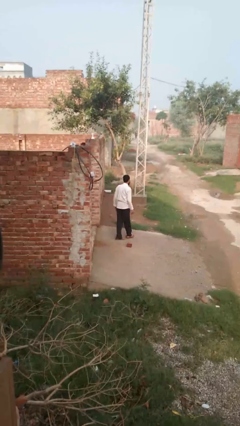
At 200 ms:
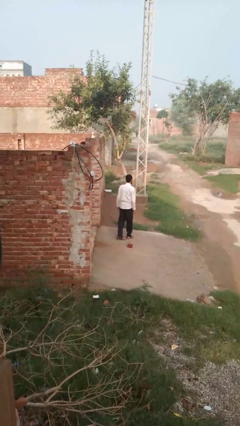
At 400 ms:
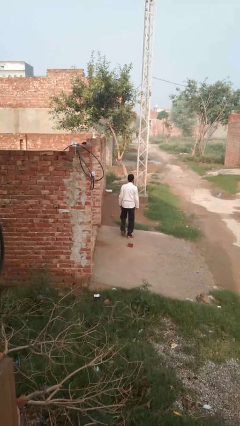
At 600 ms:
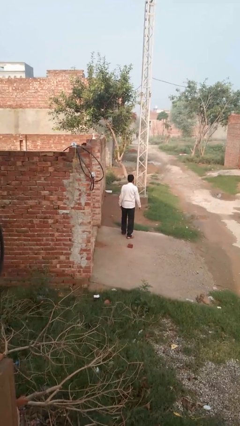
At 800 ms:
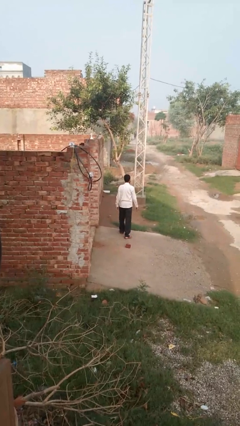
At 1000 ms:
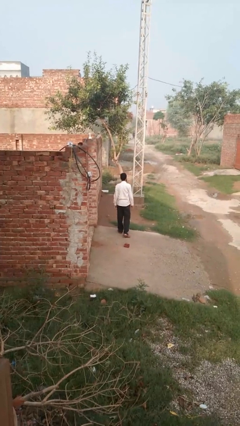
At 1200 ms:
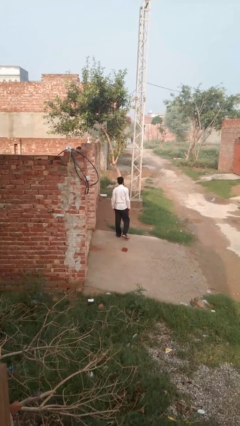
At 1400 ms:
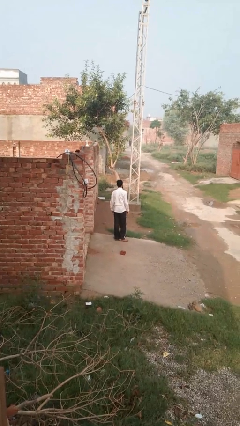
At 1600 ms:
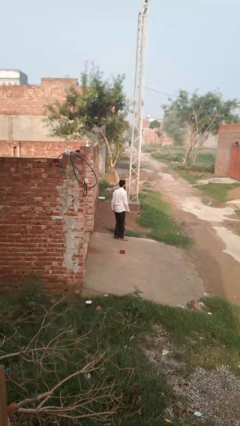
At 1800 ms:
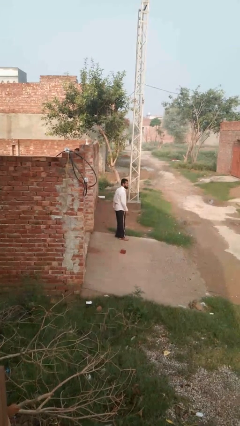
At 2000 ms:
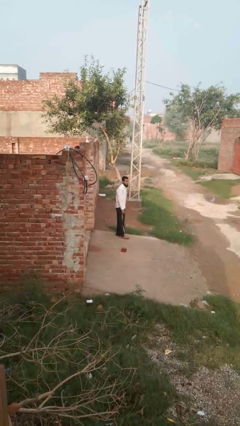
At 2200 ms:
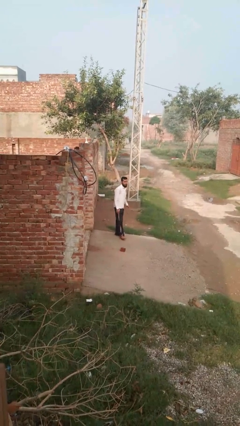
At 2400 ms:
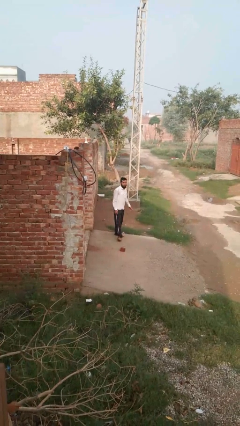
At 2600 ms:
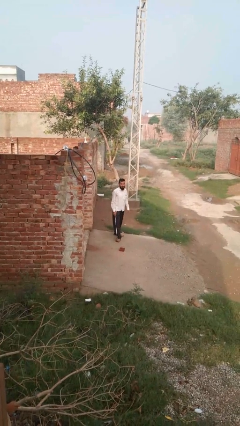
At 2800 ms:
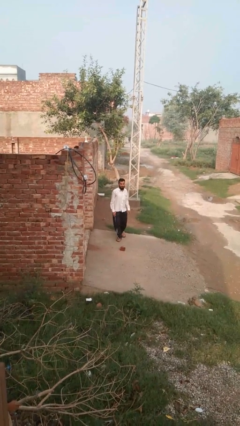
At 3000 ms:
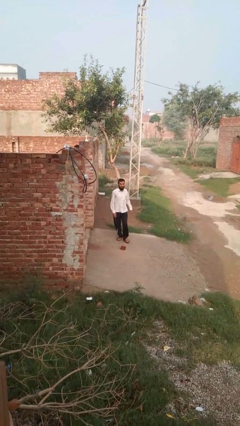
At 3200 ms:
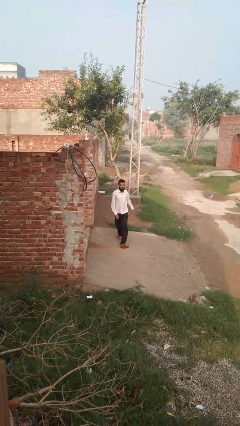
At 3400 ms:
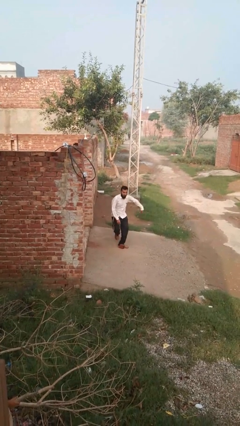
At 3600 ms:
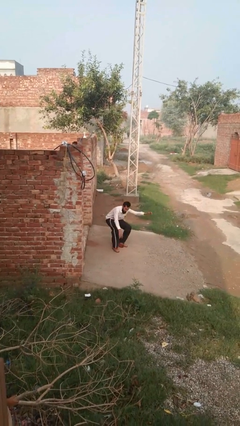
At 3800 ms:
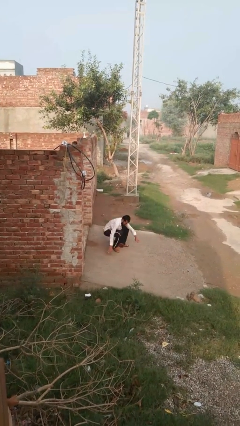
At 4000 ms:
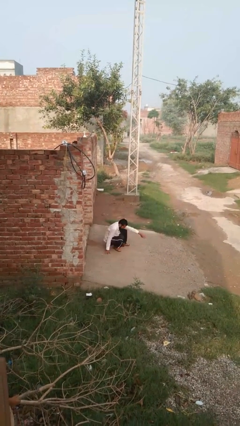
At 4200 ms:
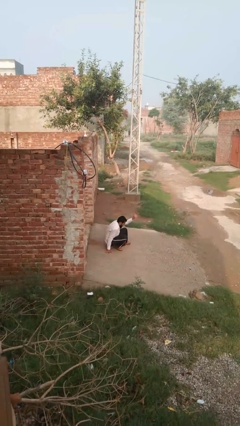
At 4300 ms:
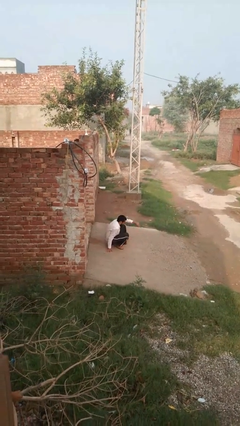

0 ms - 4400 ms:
person trips on object on floor

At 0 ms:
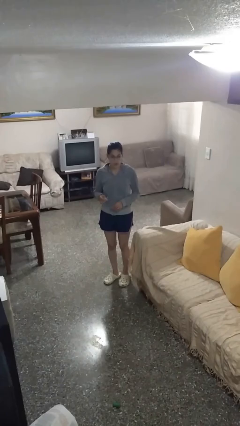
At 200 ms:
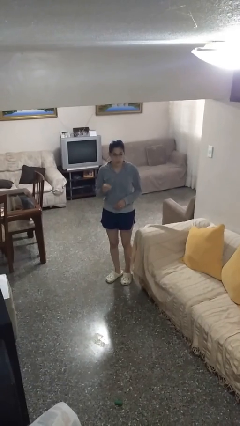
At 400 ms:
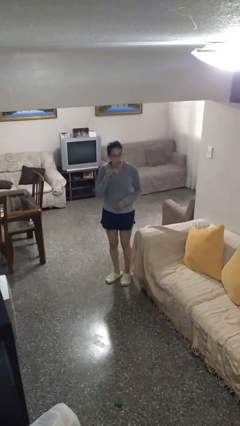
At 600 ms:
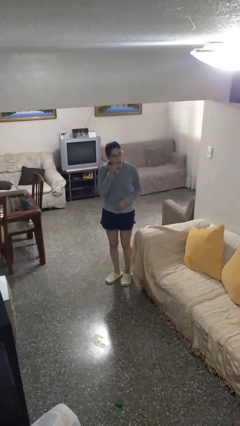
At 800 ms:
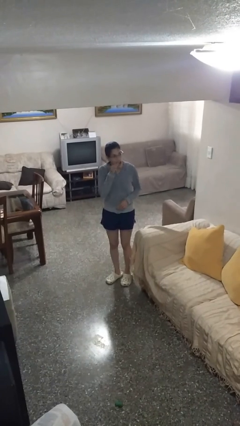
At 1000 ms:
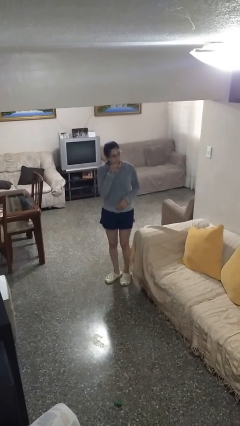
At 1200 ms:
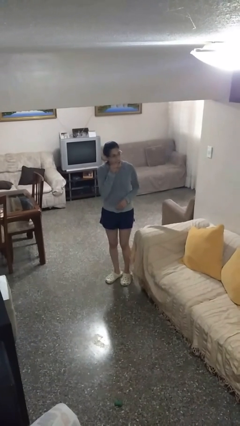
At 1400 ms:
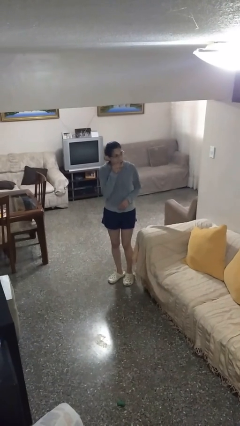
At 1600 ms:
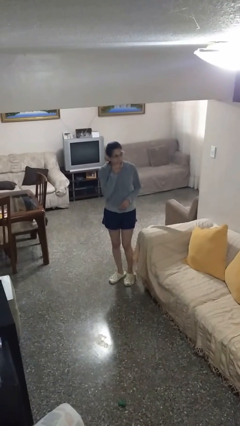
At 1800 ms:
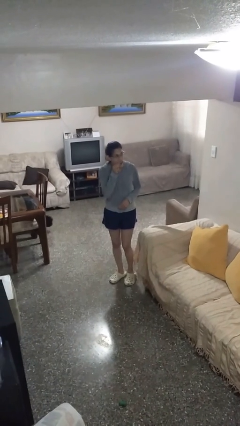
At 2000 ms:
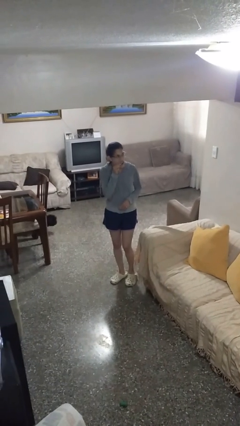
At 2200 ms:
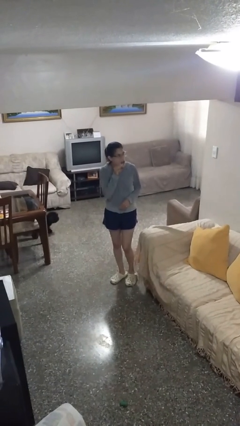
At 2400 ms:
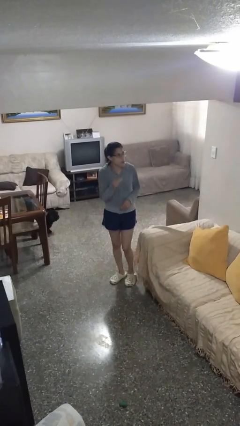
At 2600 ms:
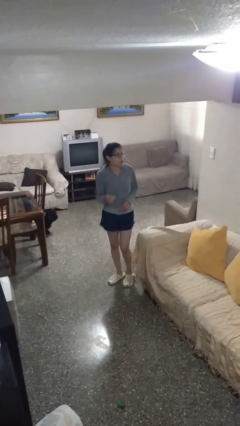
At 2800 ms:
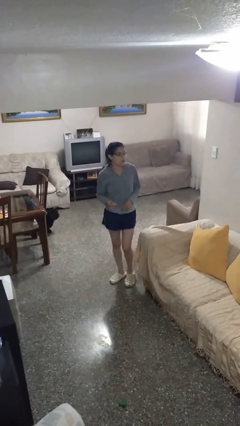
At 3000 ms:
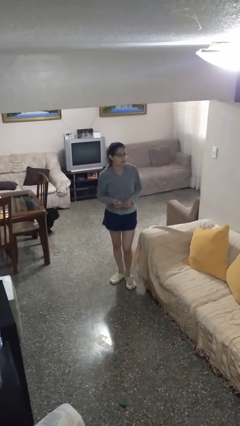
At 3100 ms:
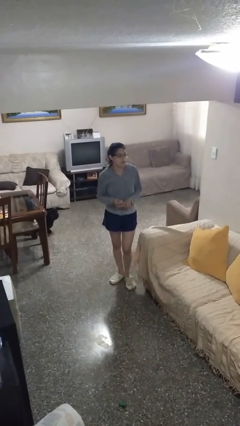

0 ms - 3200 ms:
person flosses

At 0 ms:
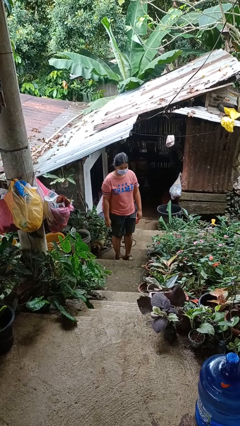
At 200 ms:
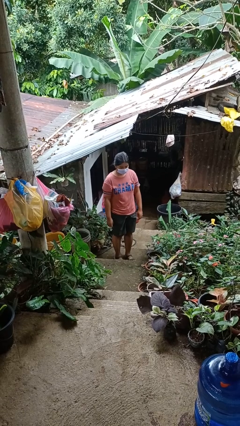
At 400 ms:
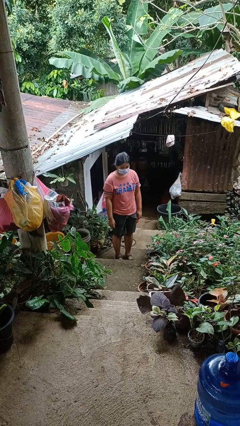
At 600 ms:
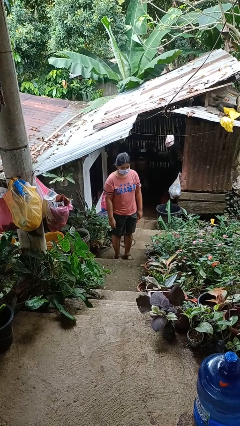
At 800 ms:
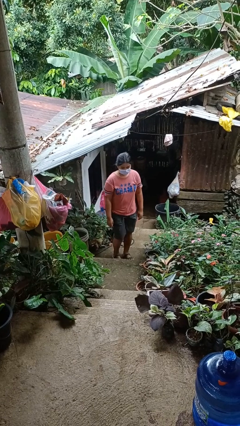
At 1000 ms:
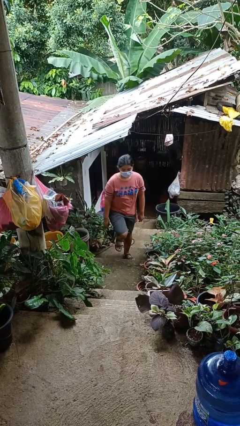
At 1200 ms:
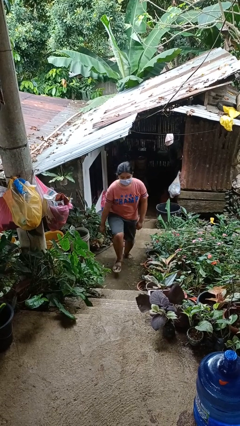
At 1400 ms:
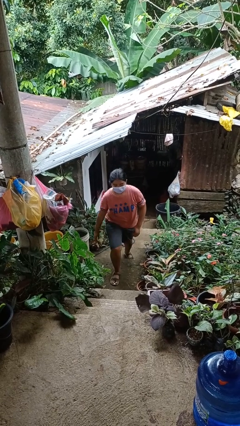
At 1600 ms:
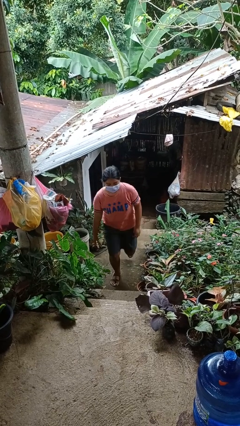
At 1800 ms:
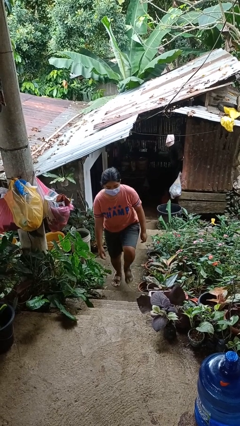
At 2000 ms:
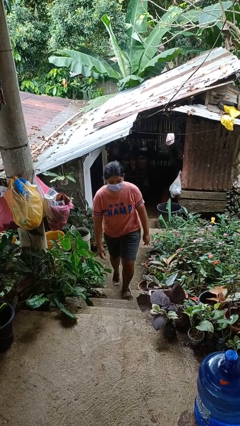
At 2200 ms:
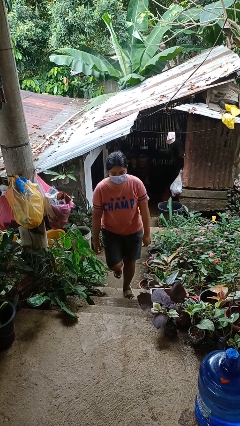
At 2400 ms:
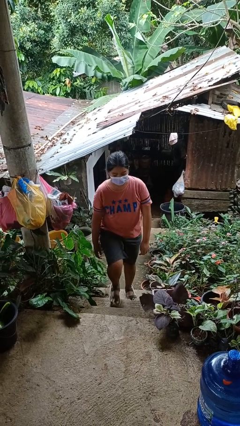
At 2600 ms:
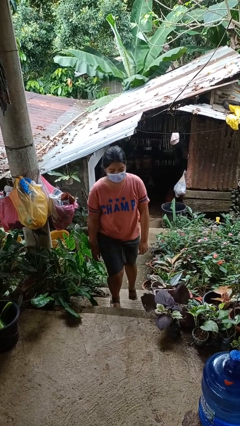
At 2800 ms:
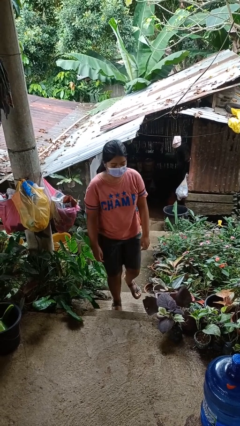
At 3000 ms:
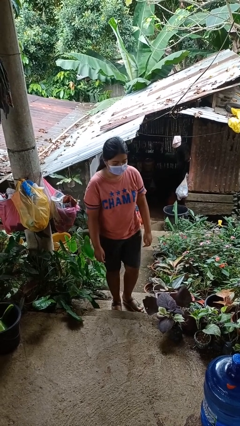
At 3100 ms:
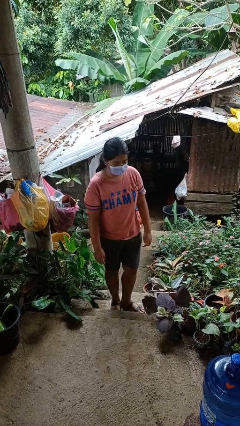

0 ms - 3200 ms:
person climbs up stairs

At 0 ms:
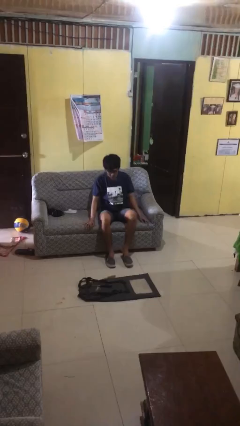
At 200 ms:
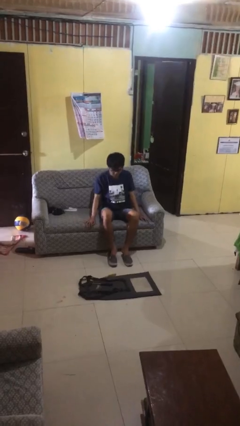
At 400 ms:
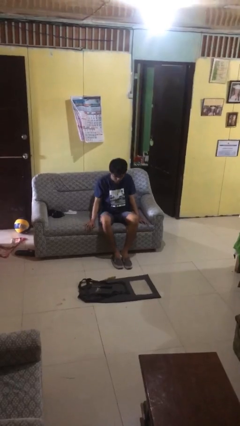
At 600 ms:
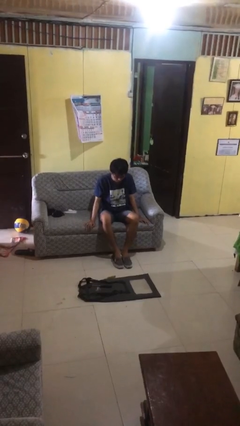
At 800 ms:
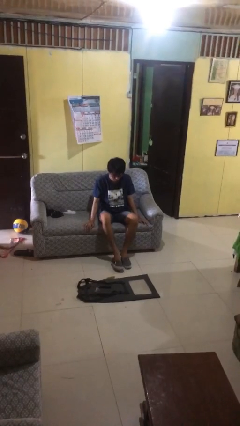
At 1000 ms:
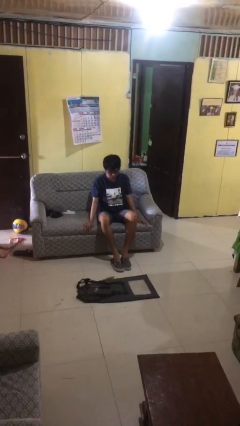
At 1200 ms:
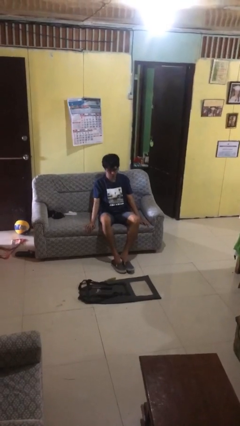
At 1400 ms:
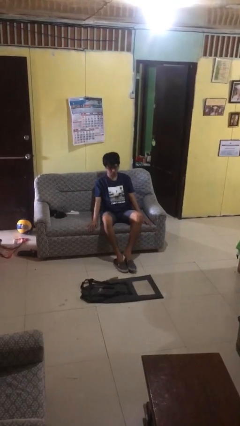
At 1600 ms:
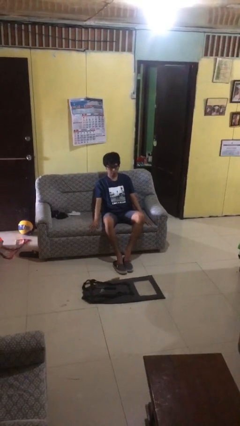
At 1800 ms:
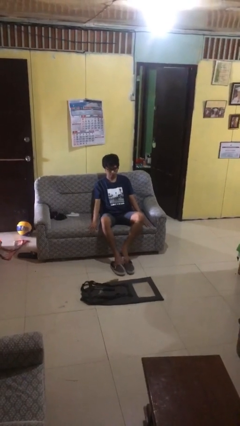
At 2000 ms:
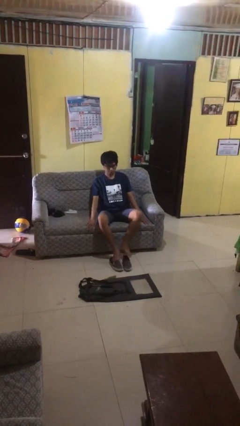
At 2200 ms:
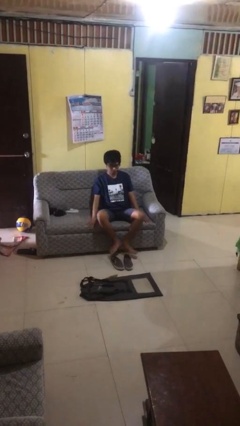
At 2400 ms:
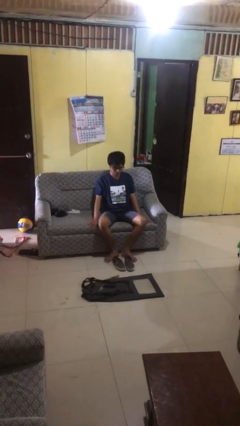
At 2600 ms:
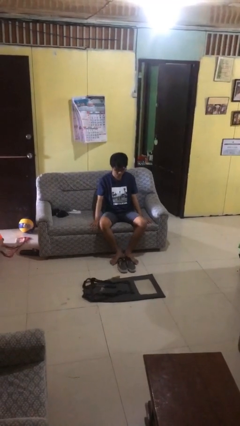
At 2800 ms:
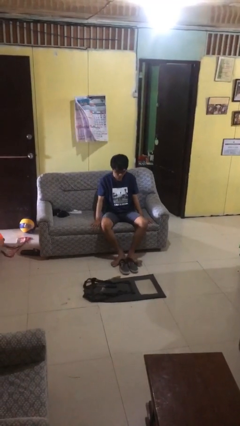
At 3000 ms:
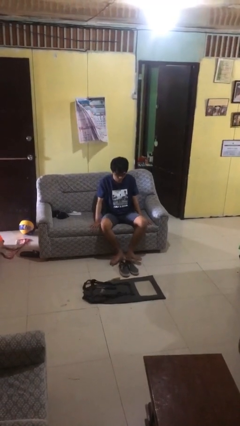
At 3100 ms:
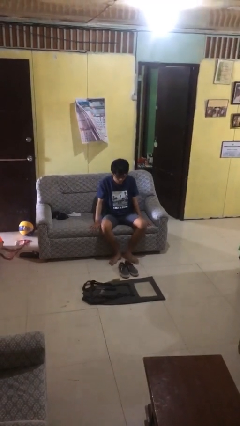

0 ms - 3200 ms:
person takes off shoes

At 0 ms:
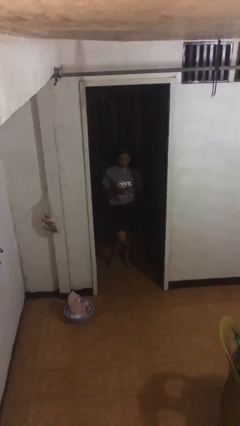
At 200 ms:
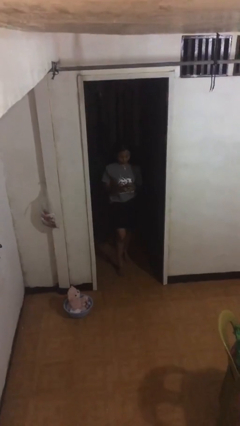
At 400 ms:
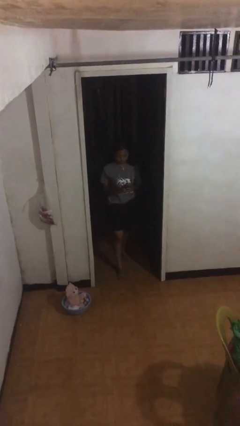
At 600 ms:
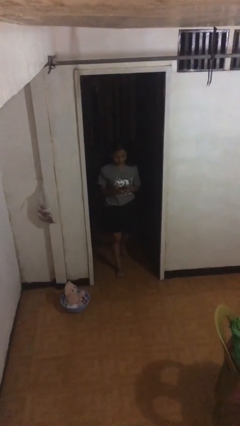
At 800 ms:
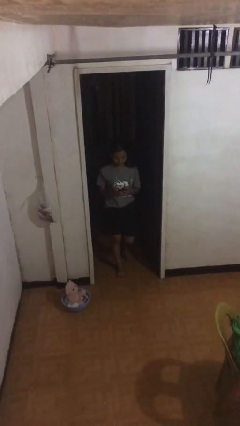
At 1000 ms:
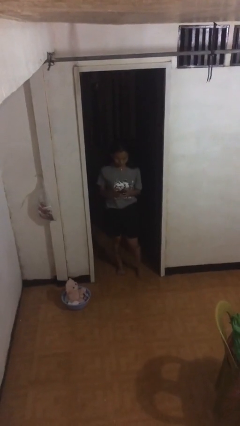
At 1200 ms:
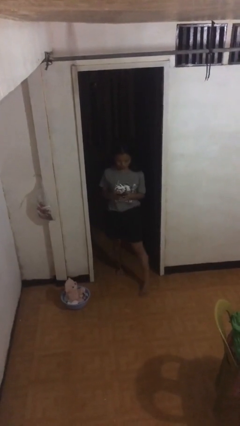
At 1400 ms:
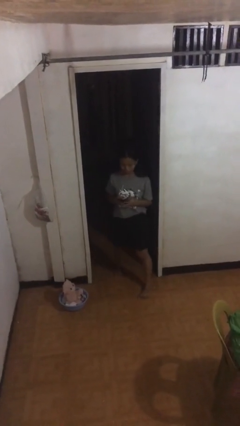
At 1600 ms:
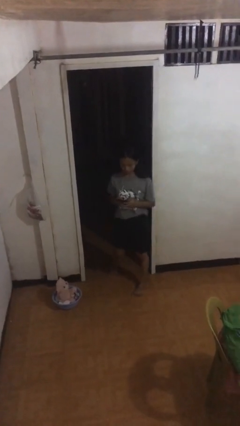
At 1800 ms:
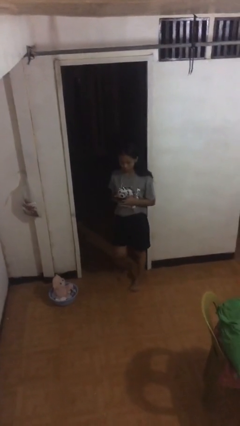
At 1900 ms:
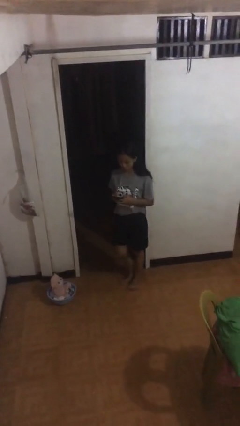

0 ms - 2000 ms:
person enters scene through structure

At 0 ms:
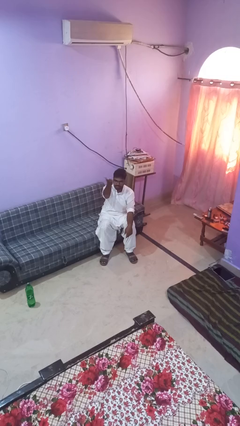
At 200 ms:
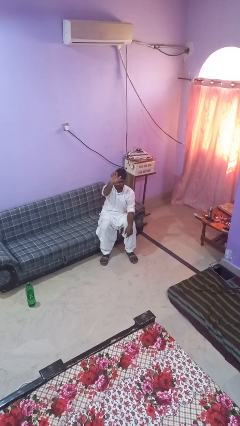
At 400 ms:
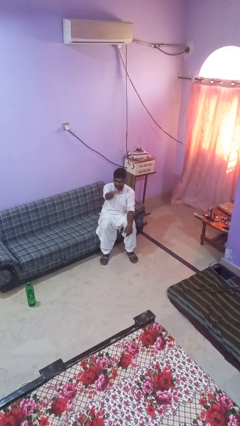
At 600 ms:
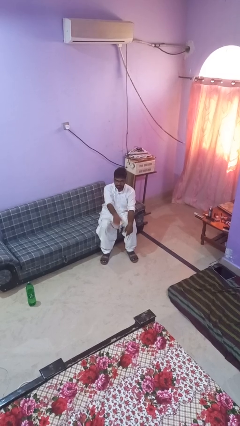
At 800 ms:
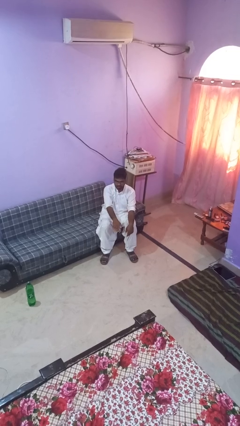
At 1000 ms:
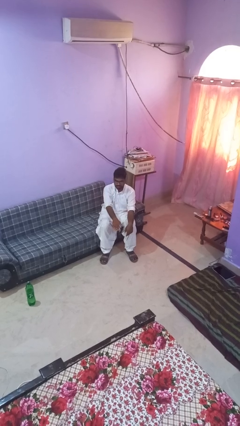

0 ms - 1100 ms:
person gestures swipe down

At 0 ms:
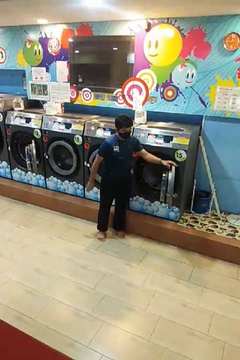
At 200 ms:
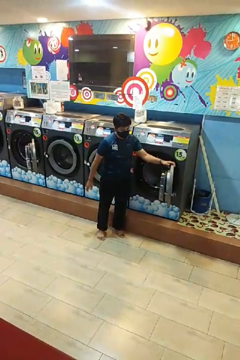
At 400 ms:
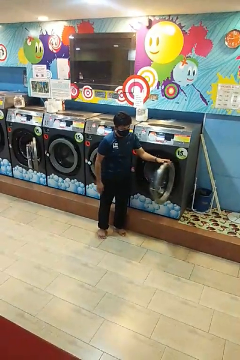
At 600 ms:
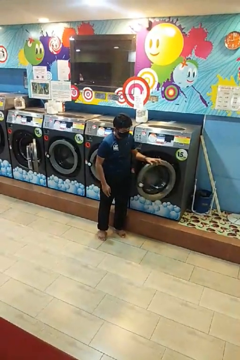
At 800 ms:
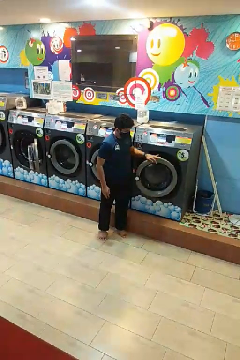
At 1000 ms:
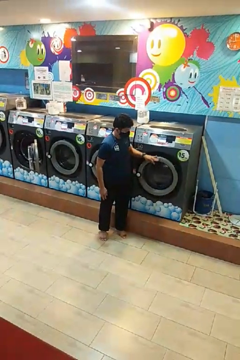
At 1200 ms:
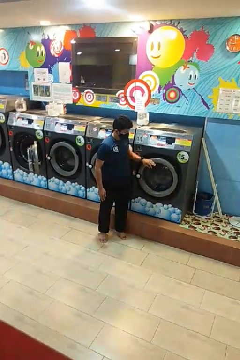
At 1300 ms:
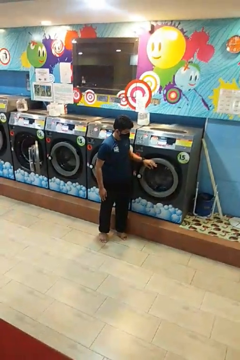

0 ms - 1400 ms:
person closes clothes washer
